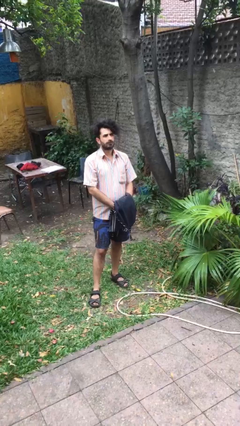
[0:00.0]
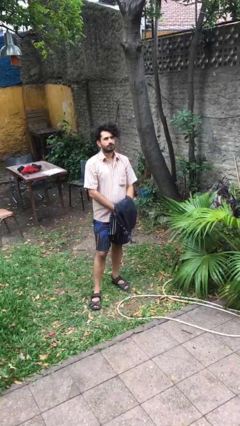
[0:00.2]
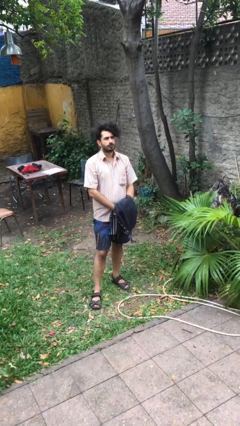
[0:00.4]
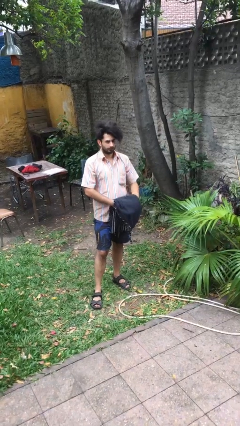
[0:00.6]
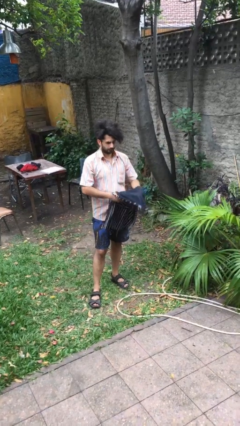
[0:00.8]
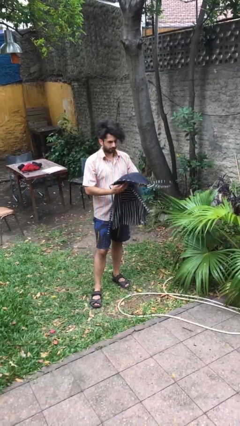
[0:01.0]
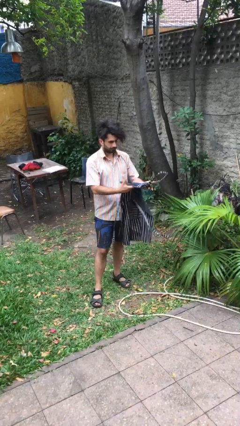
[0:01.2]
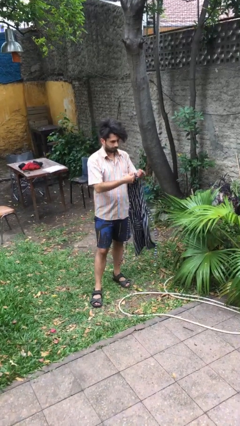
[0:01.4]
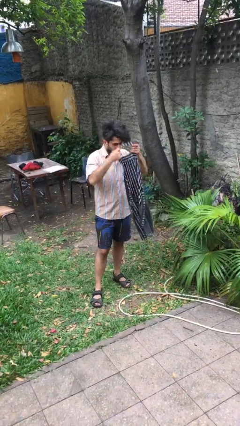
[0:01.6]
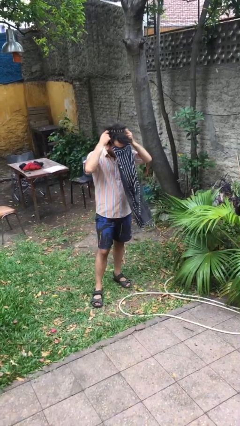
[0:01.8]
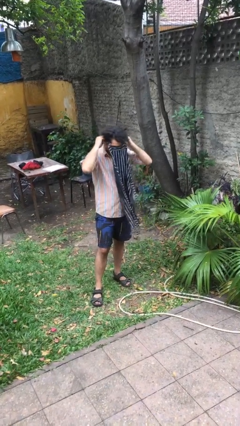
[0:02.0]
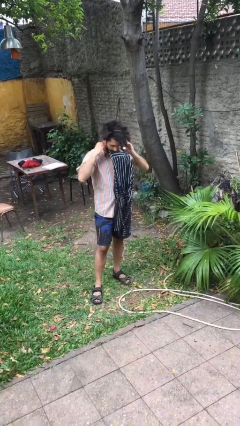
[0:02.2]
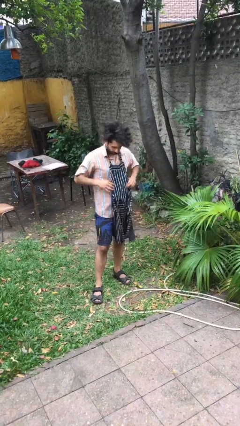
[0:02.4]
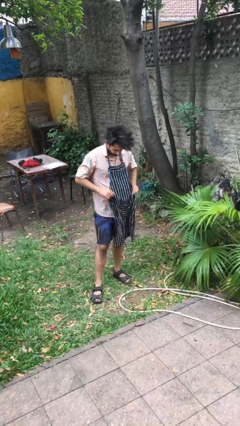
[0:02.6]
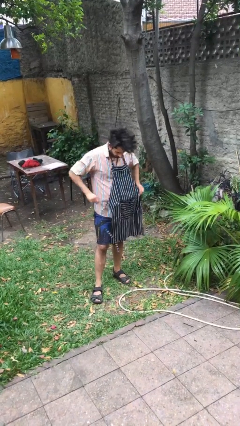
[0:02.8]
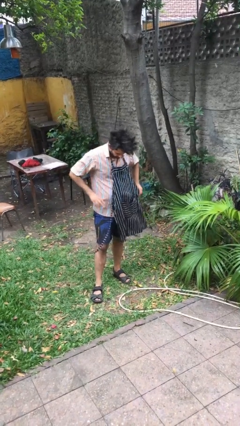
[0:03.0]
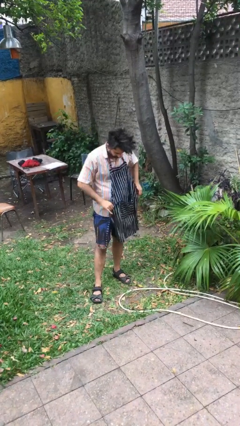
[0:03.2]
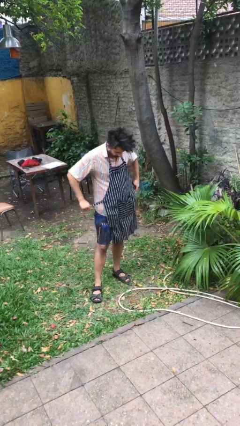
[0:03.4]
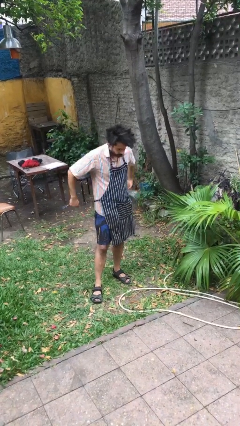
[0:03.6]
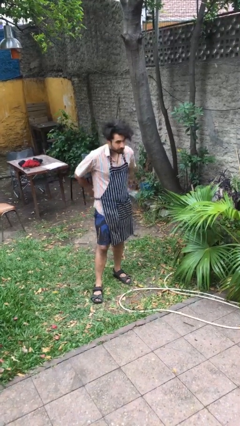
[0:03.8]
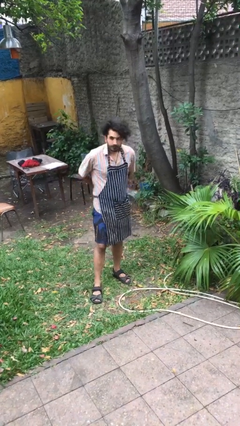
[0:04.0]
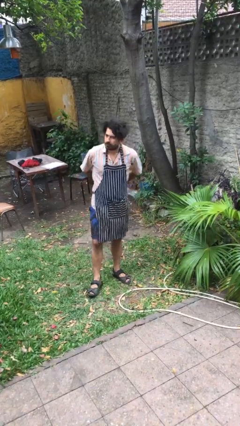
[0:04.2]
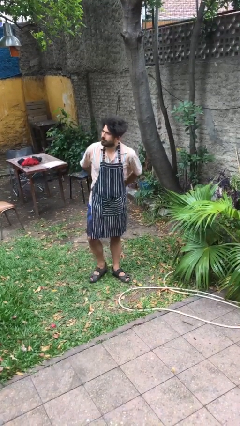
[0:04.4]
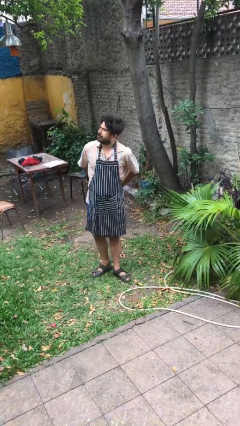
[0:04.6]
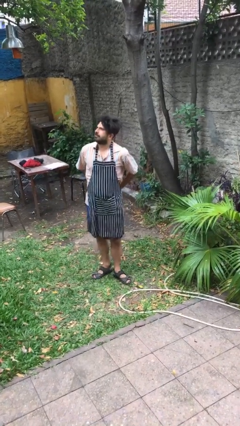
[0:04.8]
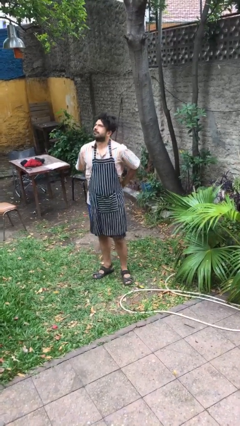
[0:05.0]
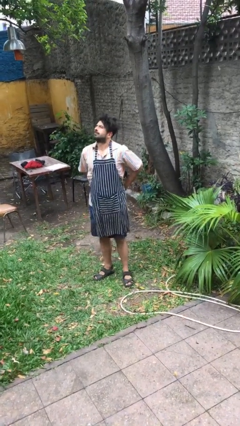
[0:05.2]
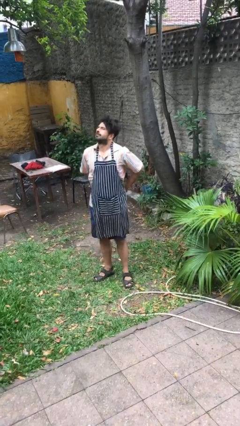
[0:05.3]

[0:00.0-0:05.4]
person puts on apron

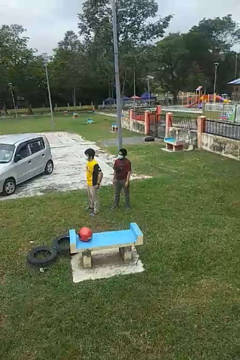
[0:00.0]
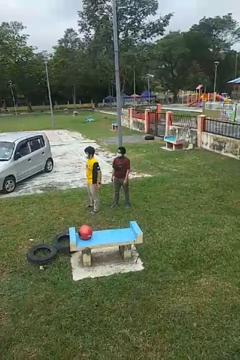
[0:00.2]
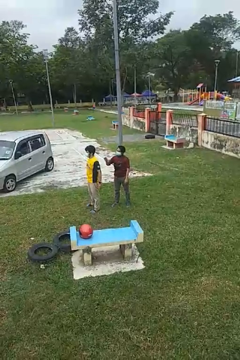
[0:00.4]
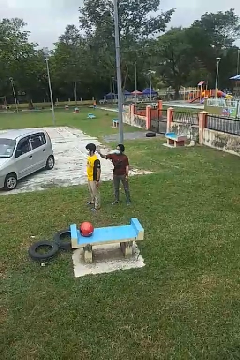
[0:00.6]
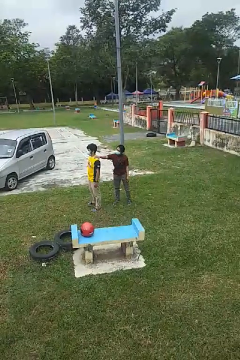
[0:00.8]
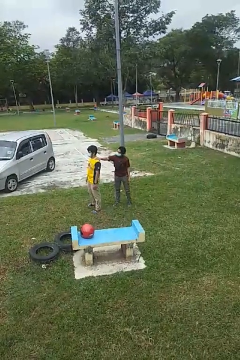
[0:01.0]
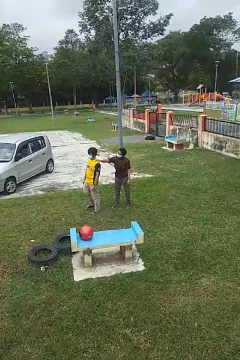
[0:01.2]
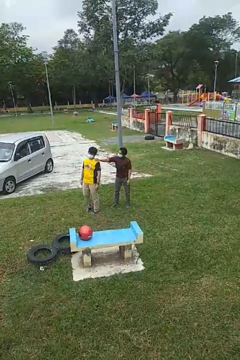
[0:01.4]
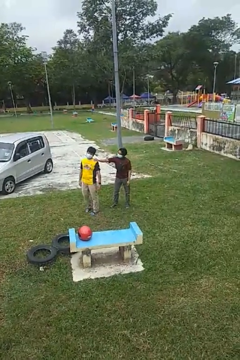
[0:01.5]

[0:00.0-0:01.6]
person grabs person by shoulder

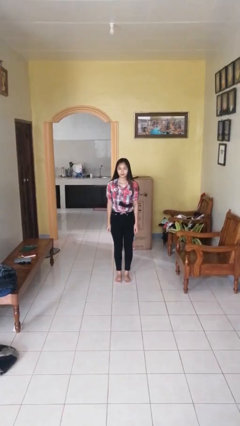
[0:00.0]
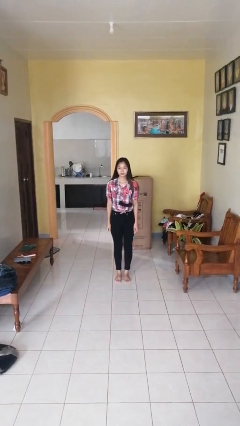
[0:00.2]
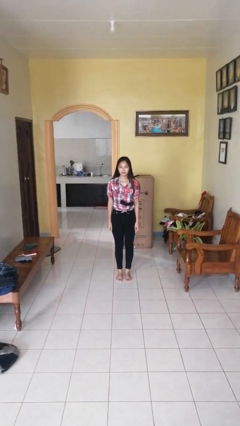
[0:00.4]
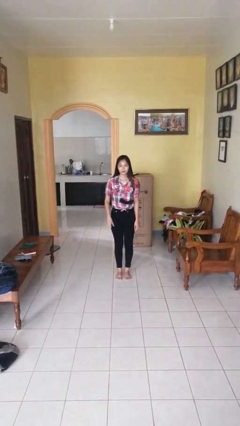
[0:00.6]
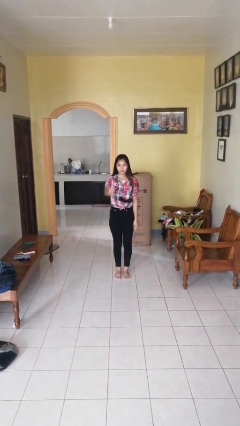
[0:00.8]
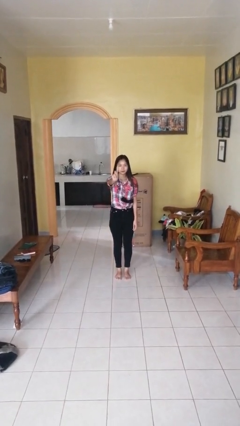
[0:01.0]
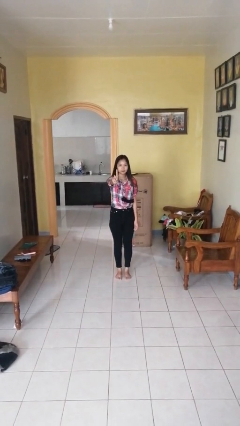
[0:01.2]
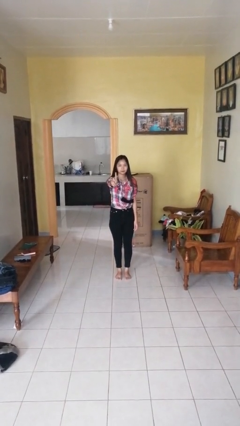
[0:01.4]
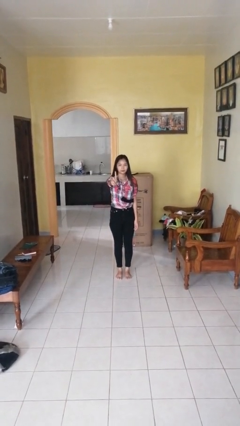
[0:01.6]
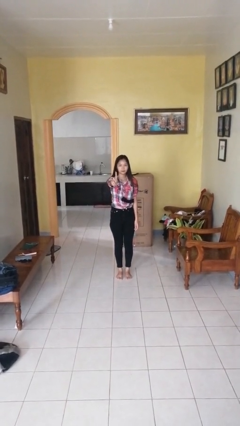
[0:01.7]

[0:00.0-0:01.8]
person gestures number one

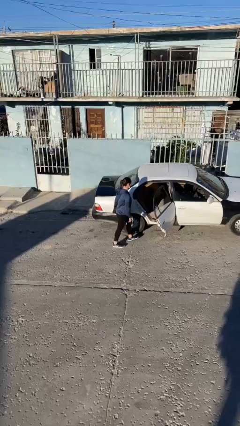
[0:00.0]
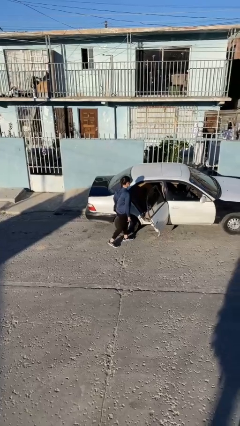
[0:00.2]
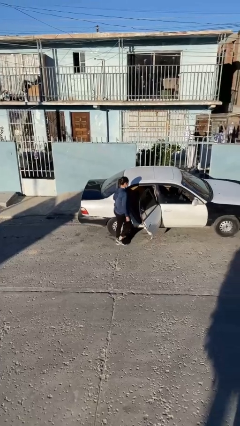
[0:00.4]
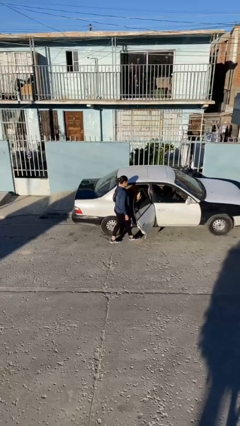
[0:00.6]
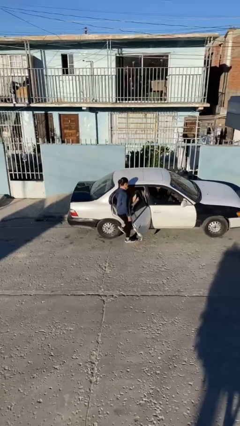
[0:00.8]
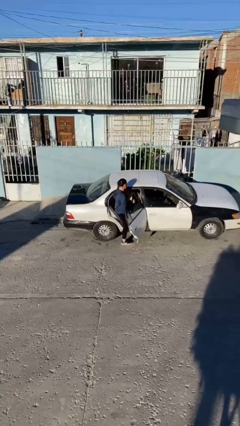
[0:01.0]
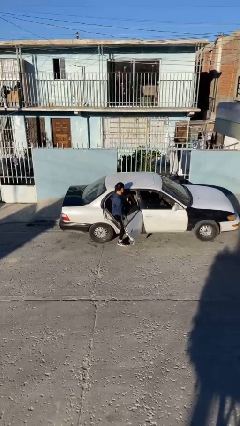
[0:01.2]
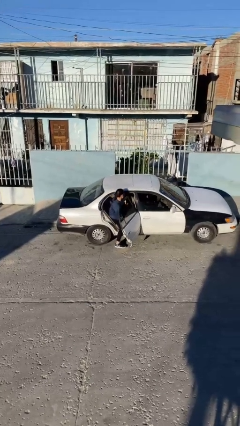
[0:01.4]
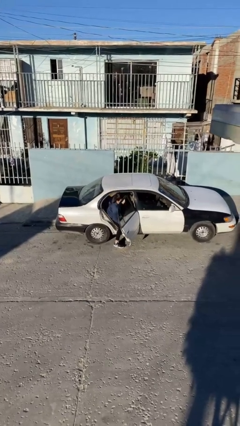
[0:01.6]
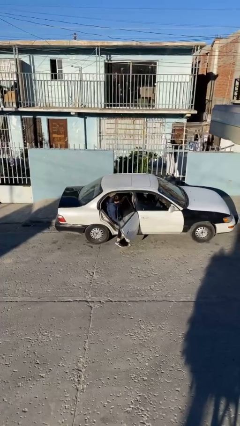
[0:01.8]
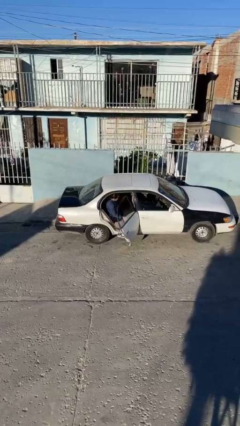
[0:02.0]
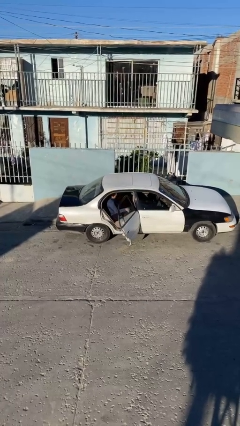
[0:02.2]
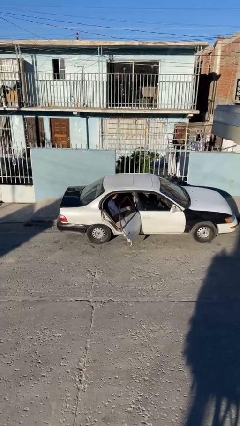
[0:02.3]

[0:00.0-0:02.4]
person enters car

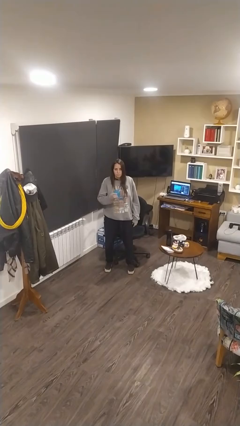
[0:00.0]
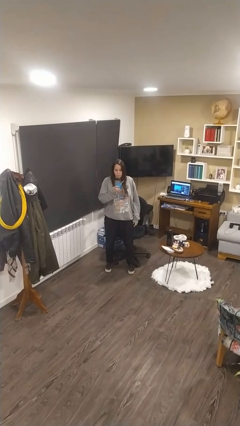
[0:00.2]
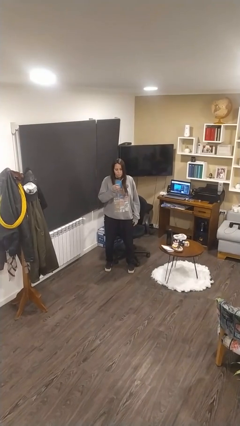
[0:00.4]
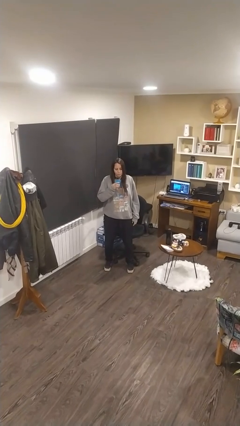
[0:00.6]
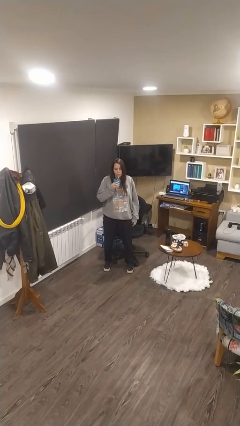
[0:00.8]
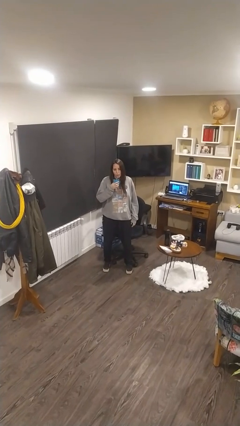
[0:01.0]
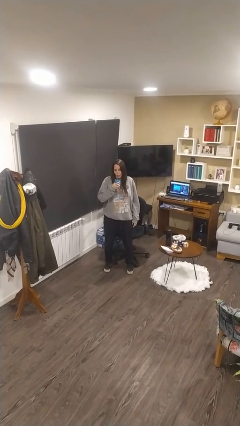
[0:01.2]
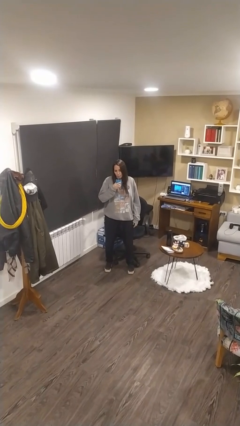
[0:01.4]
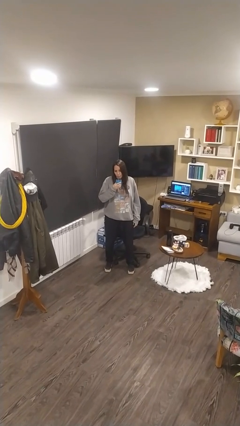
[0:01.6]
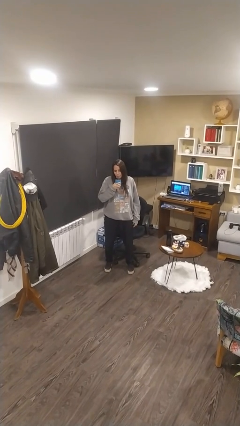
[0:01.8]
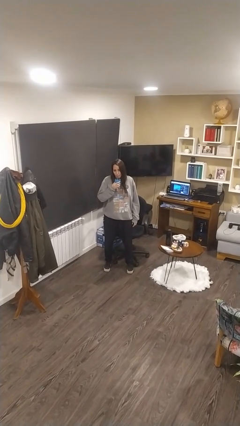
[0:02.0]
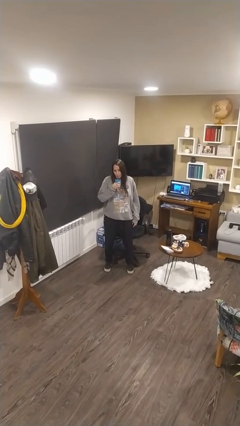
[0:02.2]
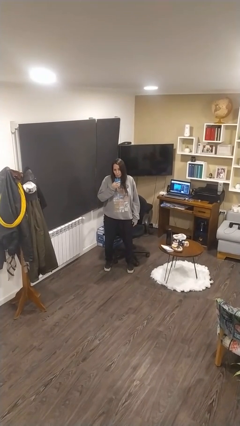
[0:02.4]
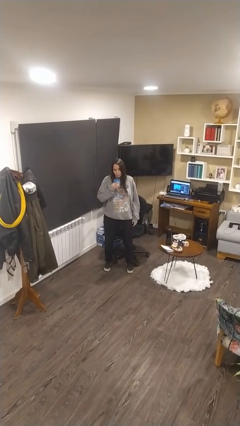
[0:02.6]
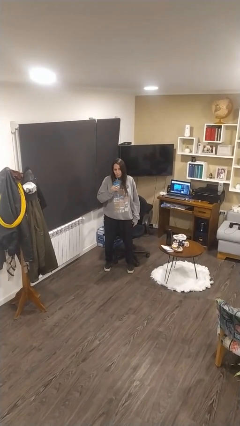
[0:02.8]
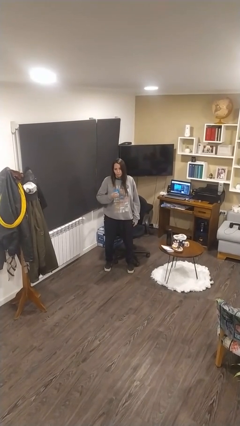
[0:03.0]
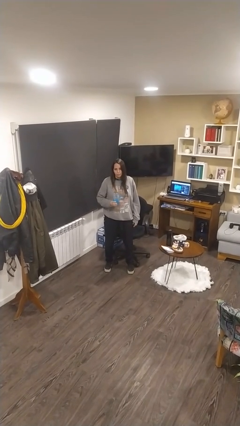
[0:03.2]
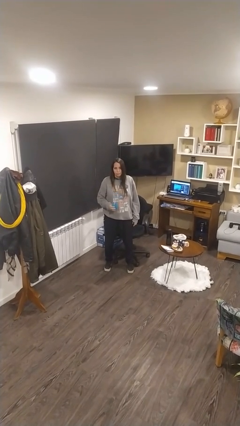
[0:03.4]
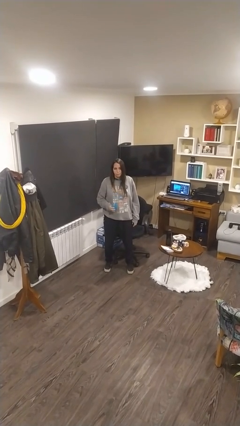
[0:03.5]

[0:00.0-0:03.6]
person drinks from straw

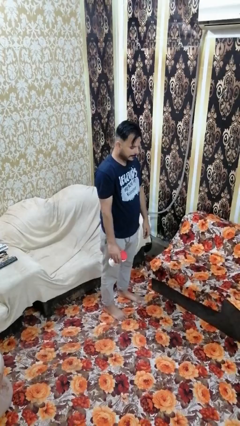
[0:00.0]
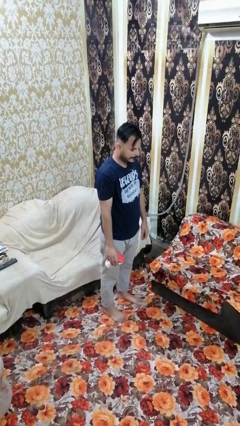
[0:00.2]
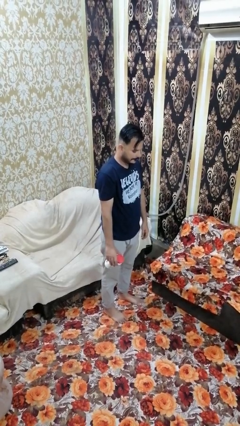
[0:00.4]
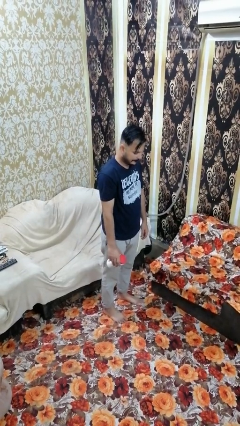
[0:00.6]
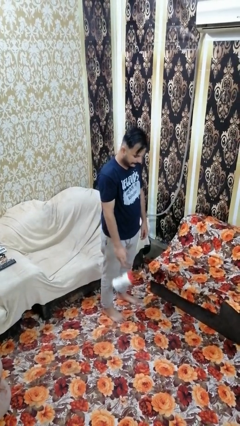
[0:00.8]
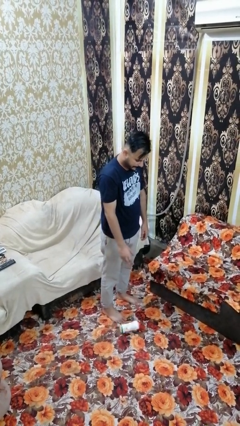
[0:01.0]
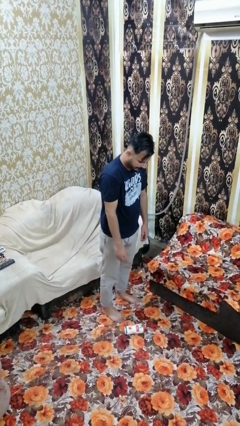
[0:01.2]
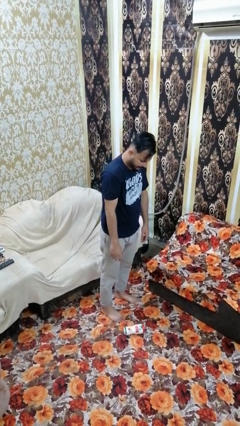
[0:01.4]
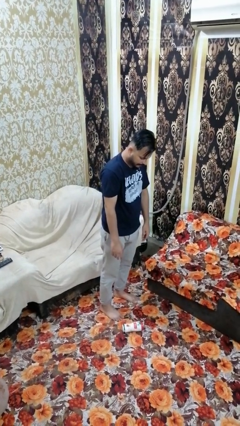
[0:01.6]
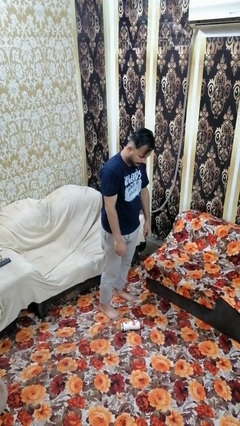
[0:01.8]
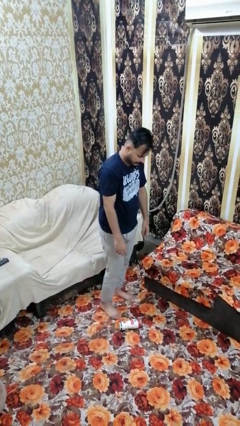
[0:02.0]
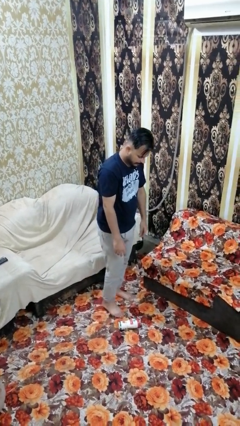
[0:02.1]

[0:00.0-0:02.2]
person drops object

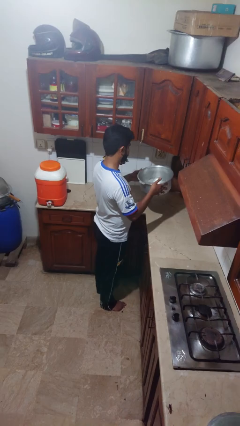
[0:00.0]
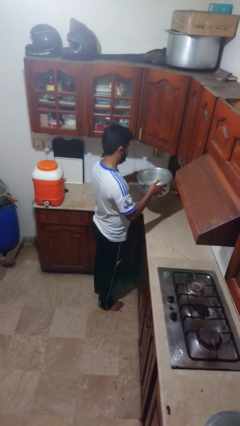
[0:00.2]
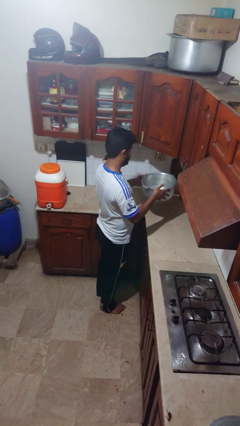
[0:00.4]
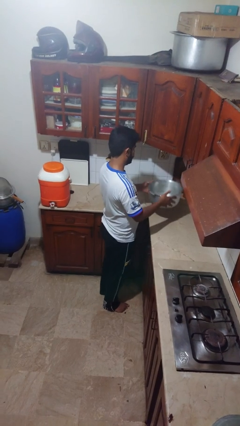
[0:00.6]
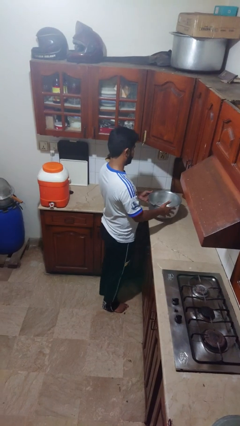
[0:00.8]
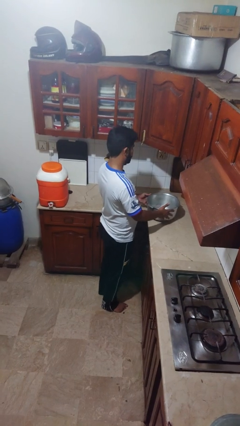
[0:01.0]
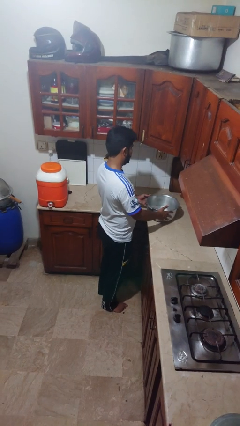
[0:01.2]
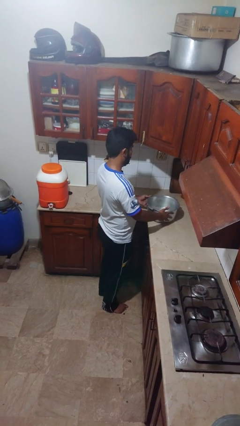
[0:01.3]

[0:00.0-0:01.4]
person puts down object on countertop
